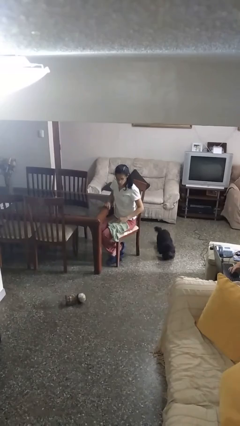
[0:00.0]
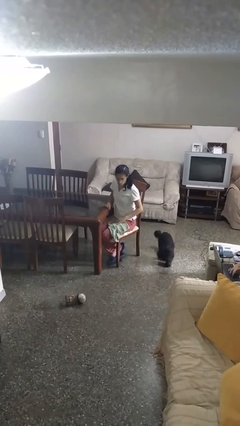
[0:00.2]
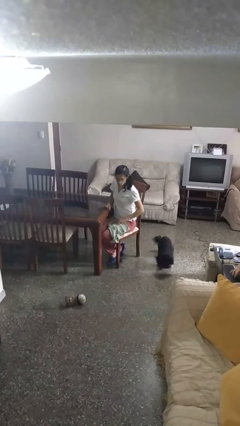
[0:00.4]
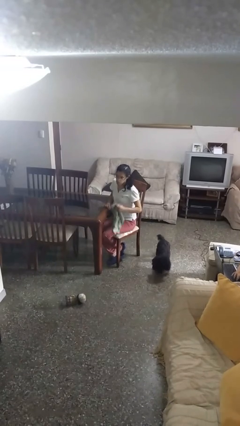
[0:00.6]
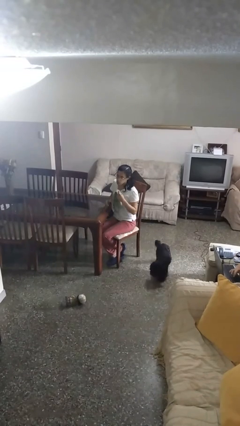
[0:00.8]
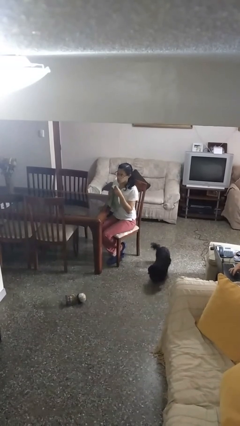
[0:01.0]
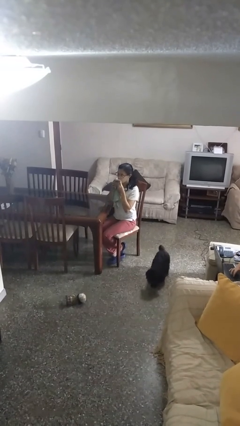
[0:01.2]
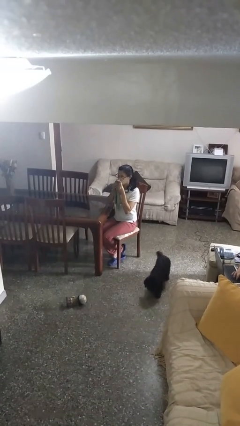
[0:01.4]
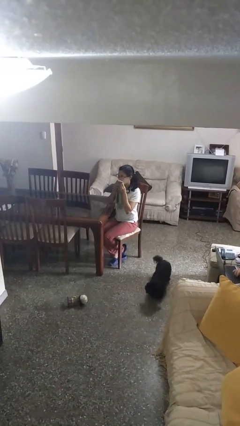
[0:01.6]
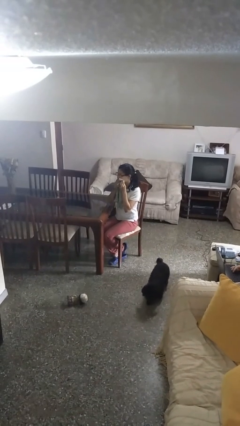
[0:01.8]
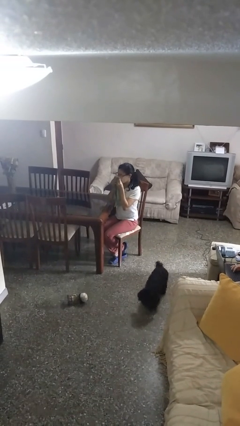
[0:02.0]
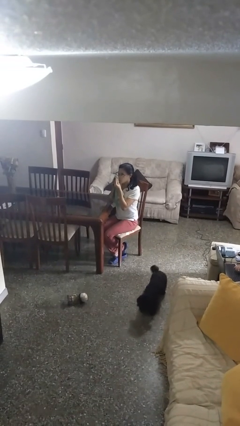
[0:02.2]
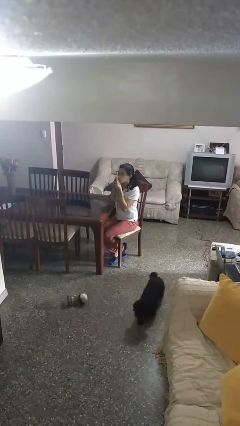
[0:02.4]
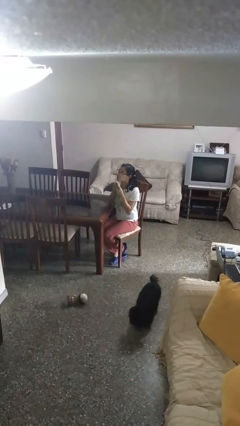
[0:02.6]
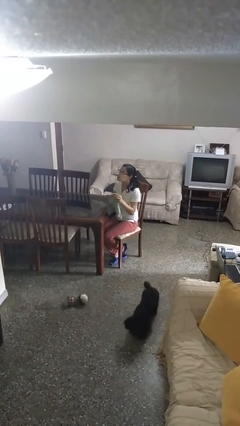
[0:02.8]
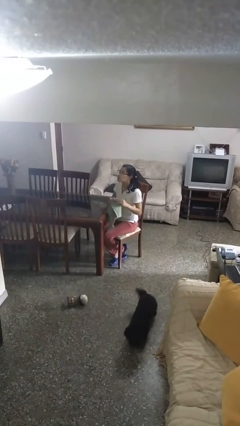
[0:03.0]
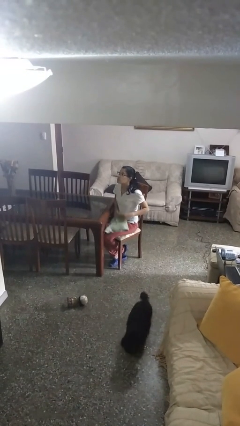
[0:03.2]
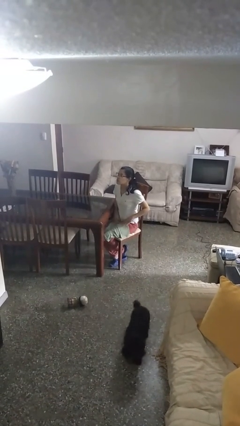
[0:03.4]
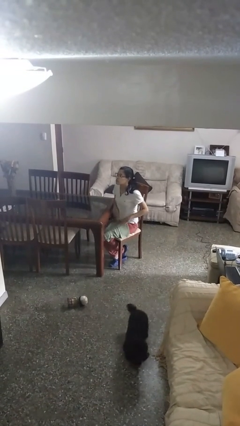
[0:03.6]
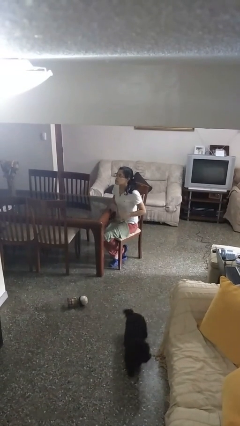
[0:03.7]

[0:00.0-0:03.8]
person wipes mouth with napkin

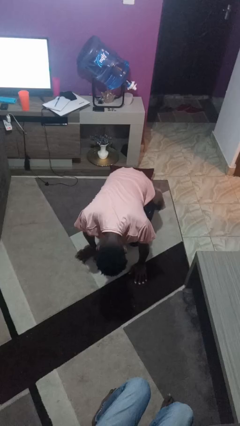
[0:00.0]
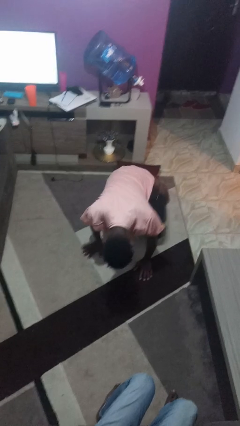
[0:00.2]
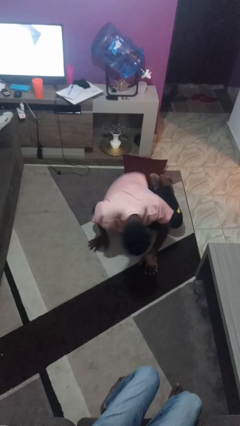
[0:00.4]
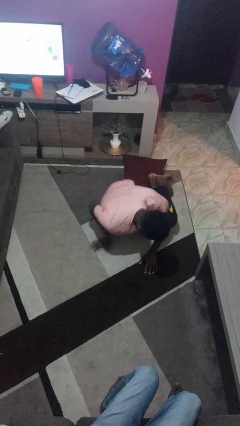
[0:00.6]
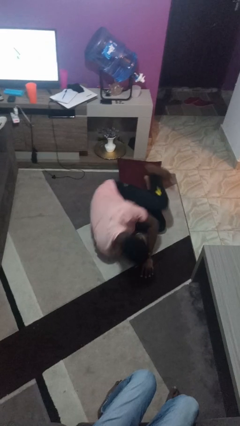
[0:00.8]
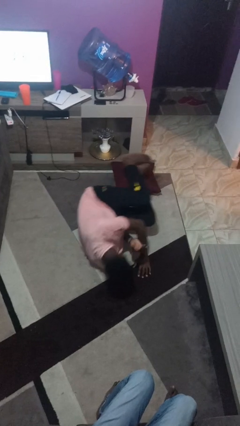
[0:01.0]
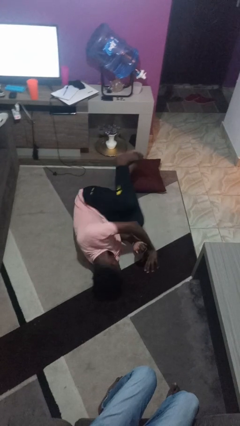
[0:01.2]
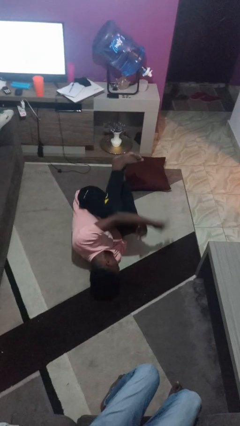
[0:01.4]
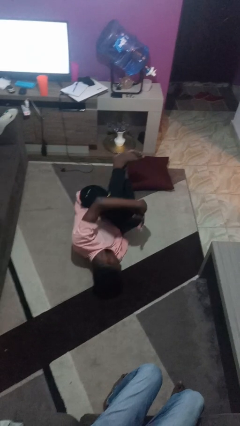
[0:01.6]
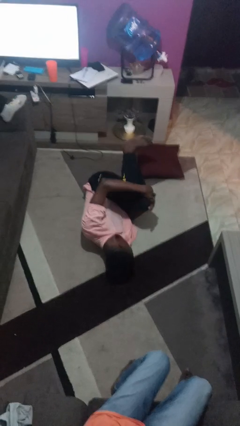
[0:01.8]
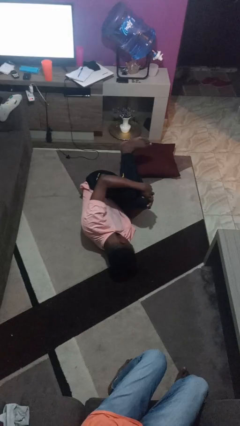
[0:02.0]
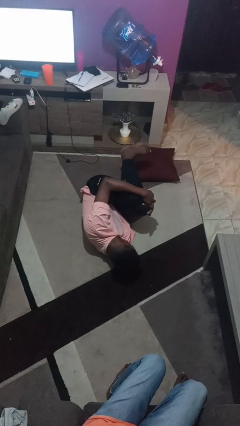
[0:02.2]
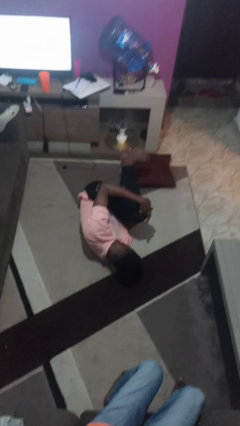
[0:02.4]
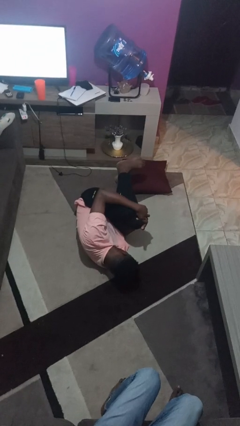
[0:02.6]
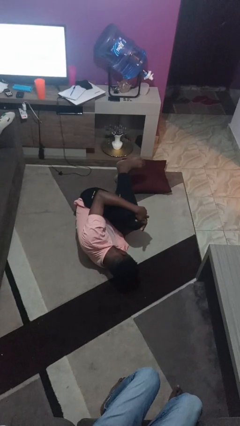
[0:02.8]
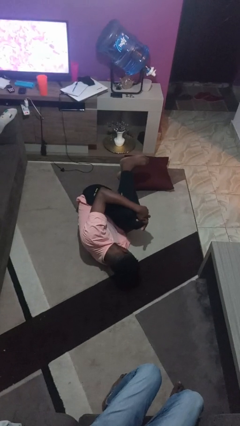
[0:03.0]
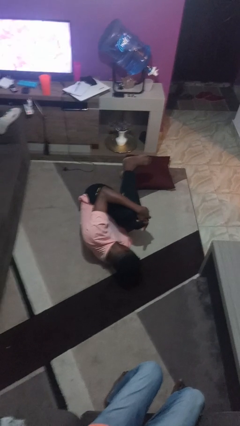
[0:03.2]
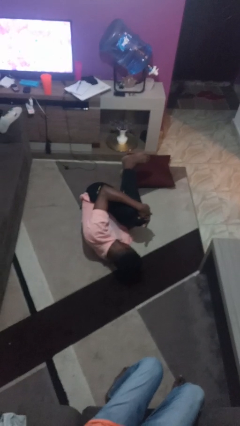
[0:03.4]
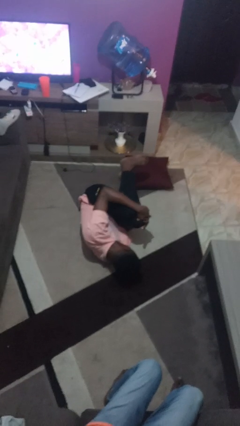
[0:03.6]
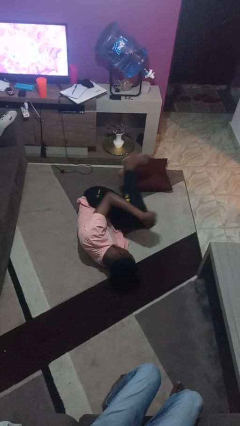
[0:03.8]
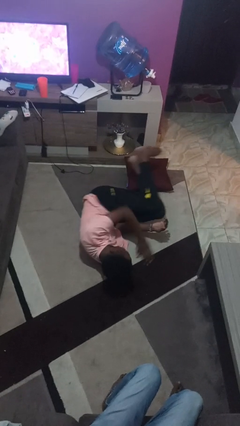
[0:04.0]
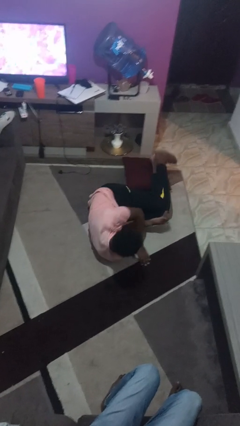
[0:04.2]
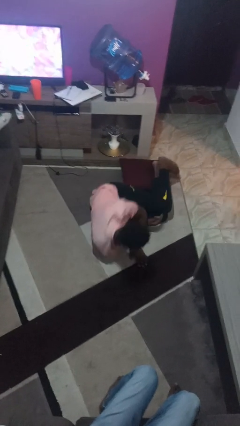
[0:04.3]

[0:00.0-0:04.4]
person lies down on floor

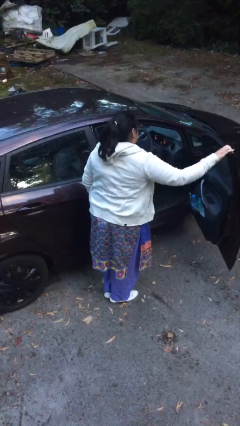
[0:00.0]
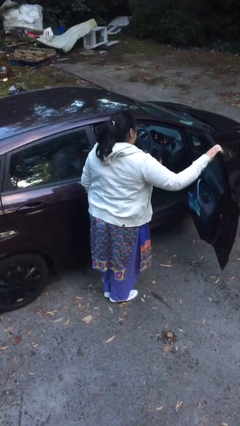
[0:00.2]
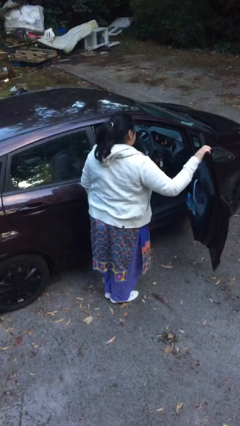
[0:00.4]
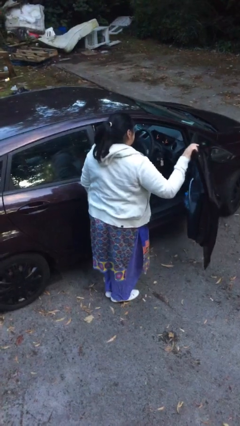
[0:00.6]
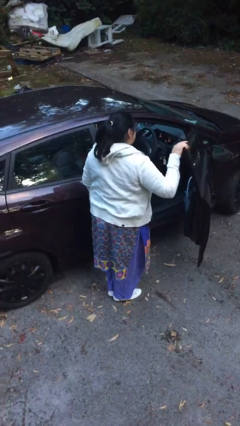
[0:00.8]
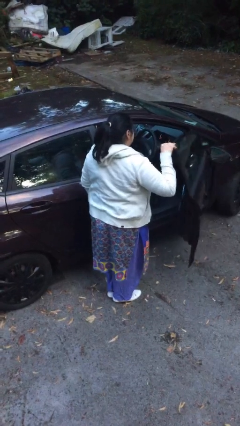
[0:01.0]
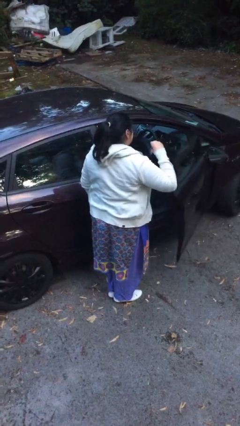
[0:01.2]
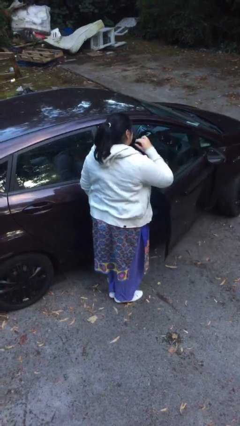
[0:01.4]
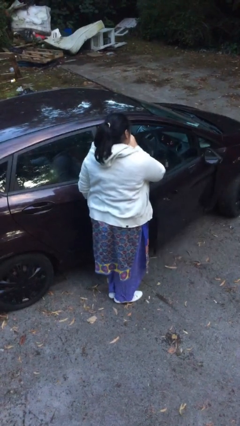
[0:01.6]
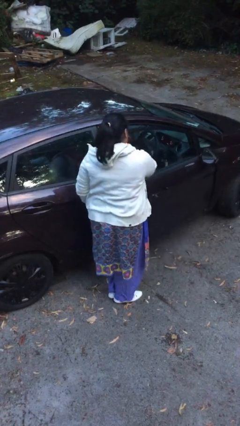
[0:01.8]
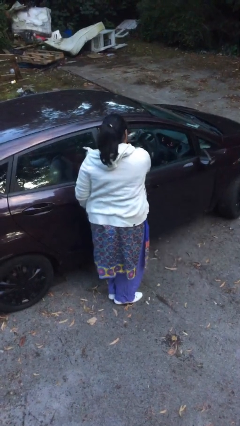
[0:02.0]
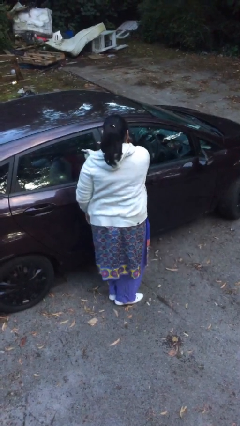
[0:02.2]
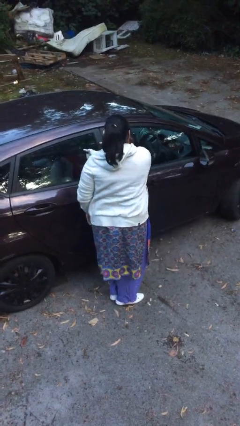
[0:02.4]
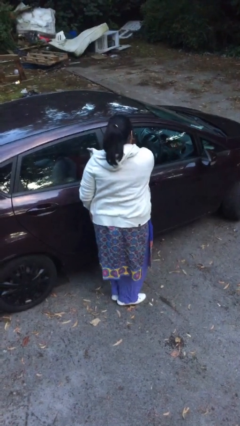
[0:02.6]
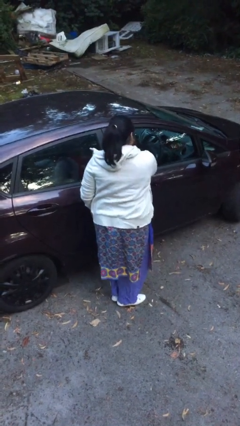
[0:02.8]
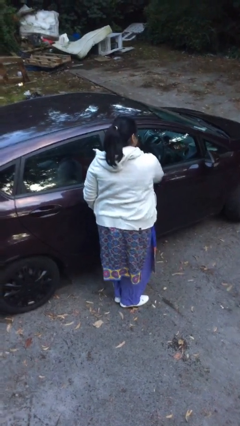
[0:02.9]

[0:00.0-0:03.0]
person closes car door

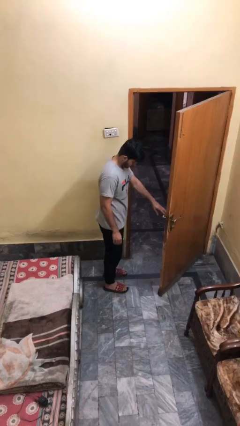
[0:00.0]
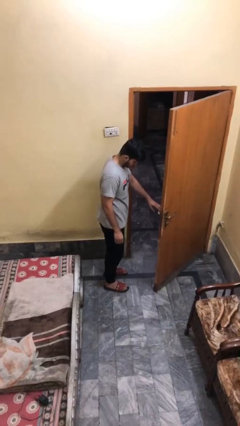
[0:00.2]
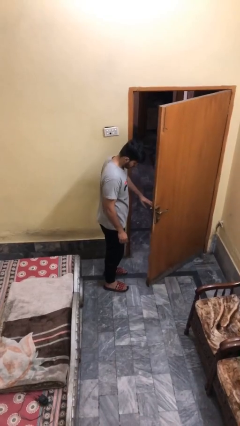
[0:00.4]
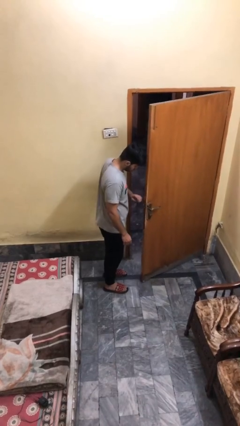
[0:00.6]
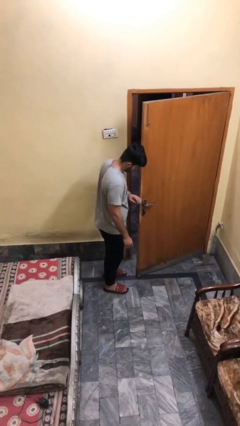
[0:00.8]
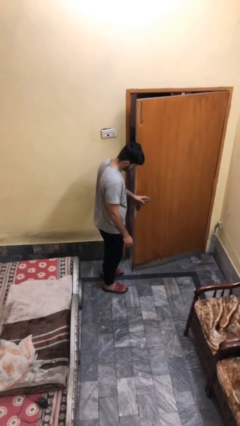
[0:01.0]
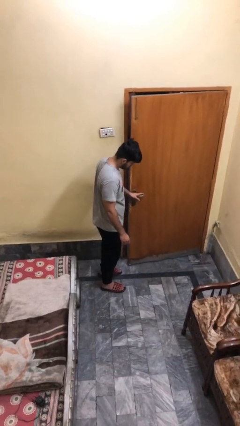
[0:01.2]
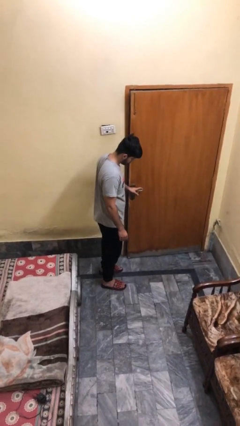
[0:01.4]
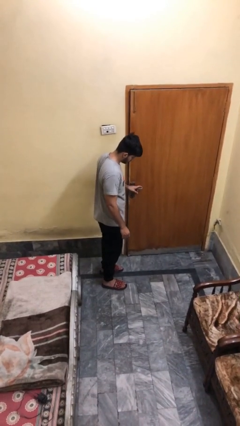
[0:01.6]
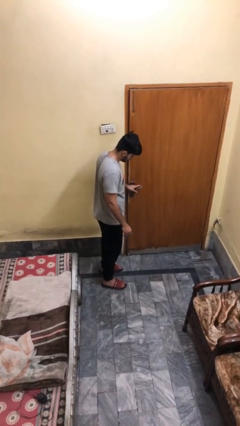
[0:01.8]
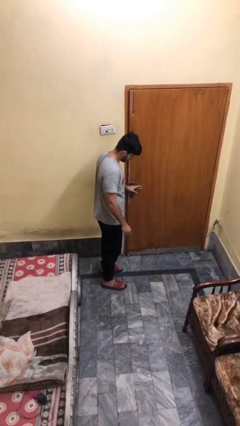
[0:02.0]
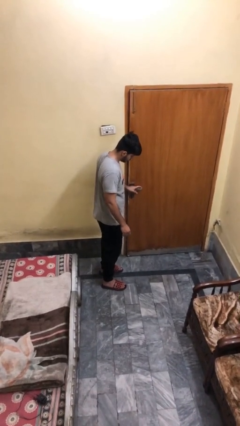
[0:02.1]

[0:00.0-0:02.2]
person closes facility door

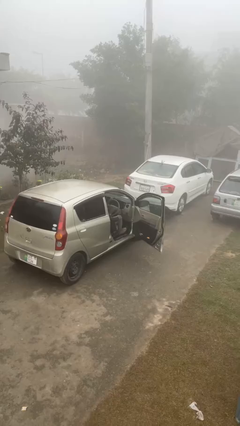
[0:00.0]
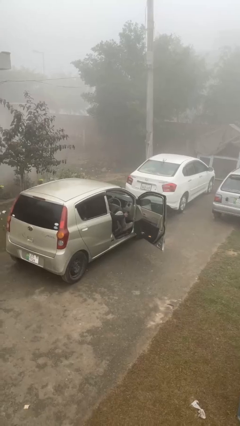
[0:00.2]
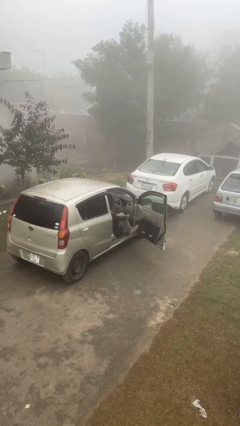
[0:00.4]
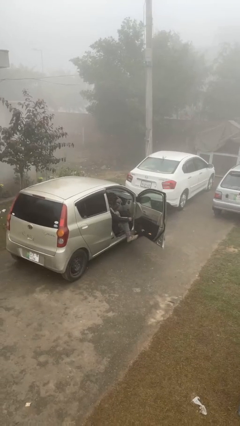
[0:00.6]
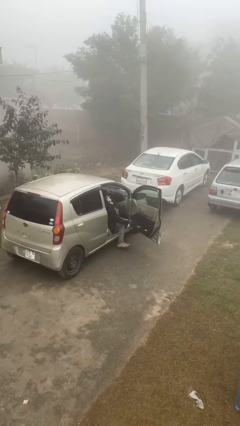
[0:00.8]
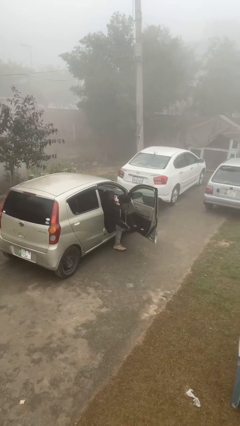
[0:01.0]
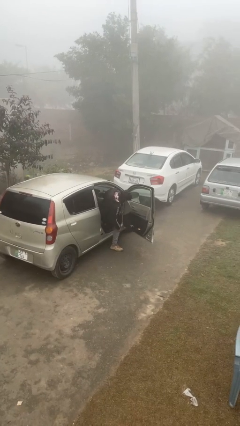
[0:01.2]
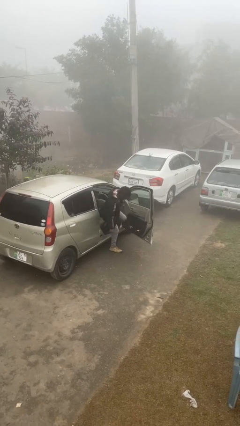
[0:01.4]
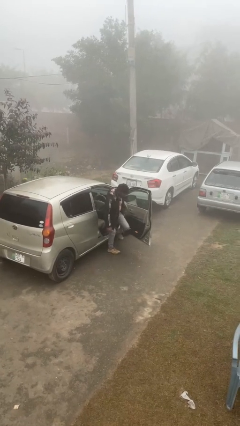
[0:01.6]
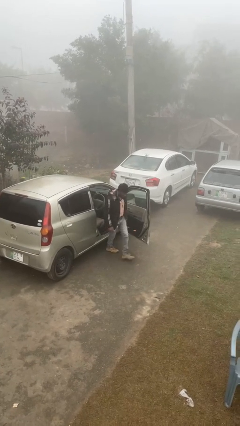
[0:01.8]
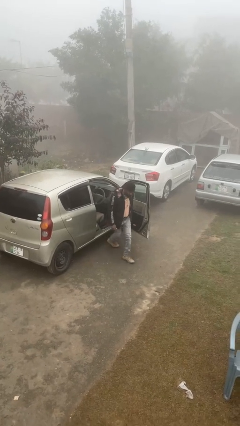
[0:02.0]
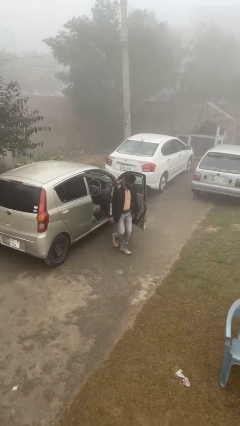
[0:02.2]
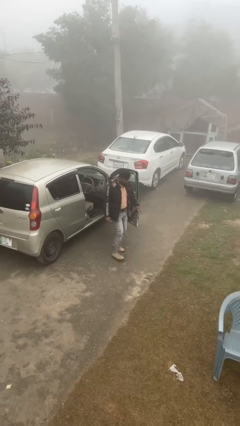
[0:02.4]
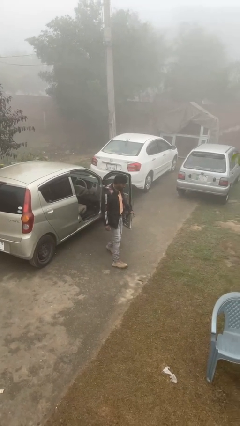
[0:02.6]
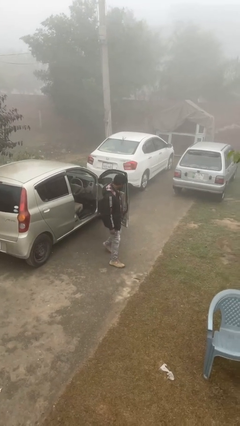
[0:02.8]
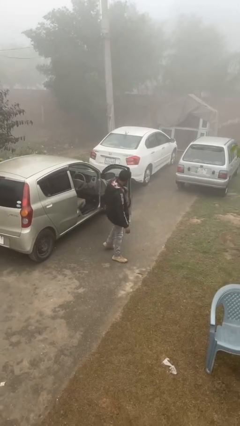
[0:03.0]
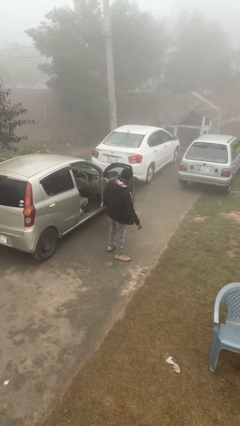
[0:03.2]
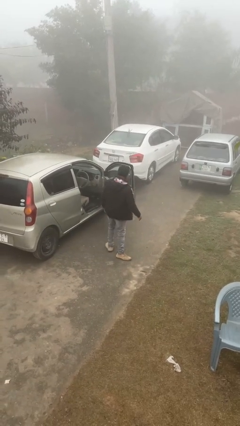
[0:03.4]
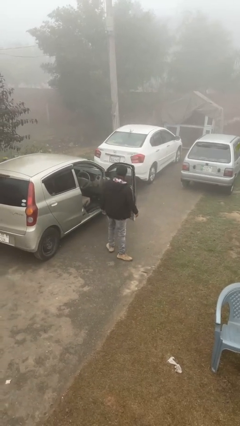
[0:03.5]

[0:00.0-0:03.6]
person exits car

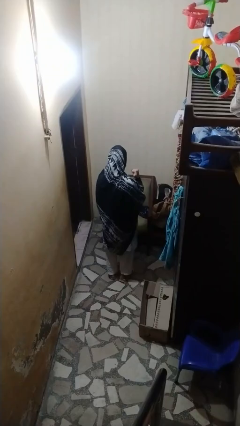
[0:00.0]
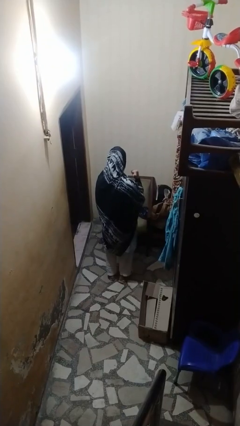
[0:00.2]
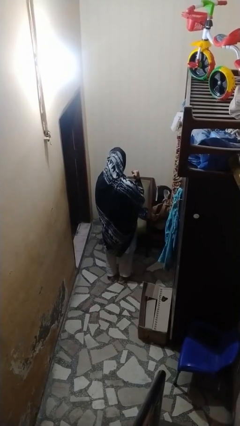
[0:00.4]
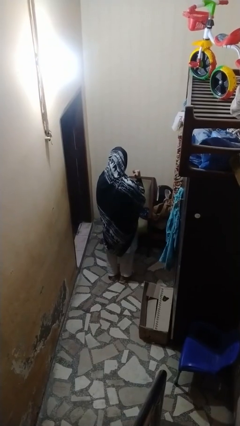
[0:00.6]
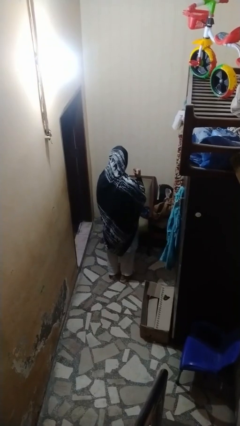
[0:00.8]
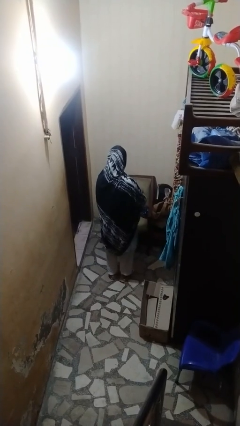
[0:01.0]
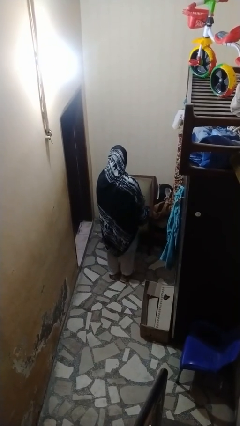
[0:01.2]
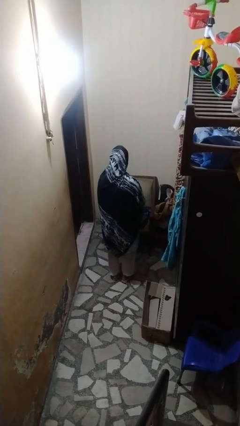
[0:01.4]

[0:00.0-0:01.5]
person gestures behind me
